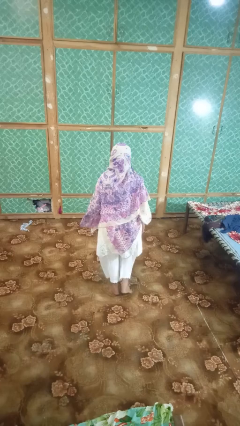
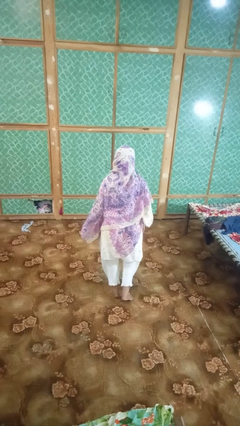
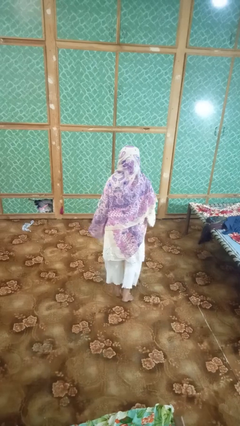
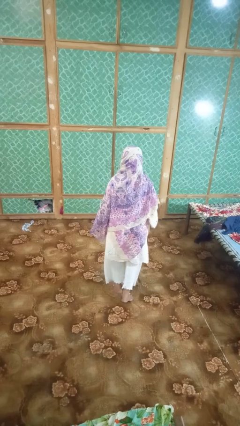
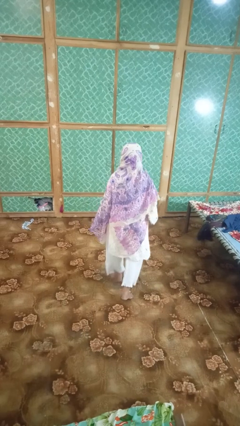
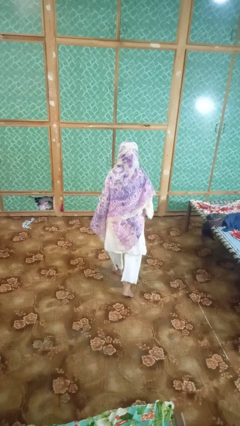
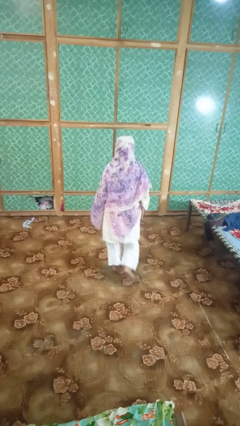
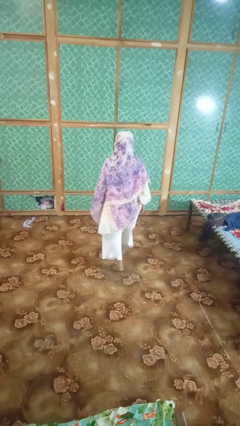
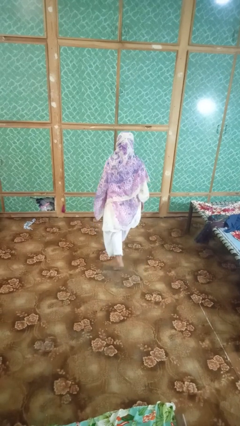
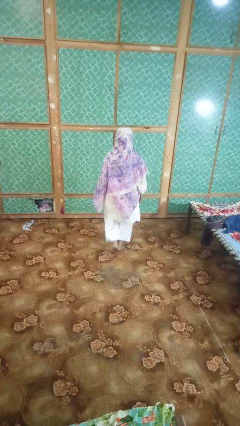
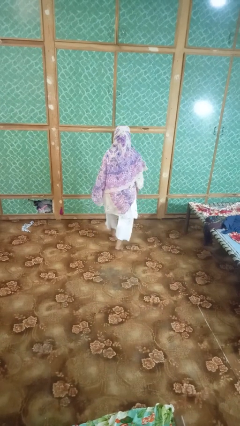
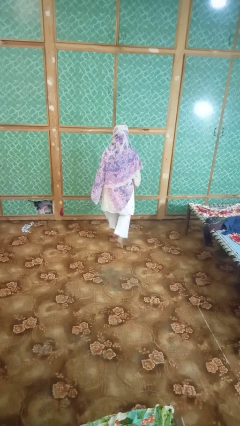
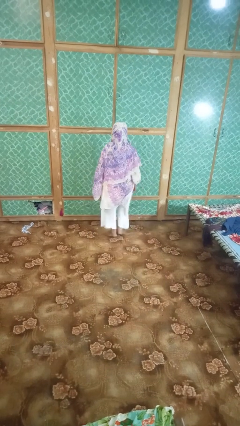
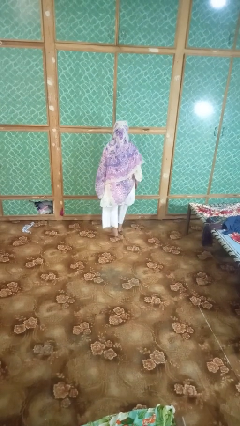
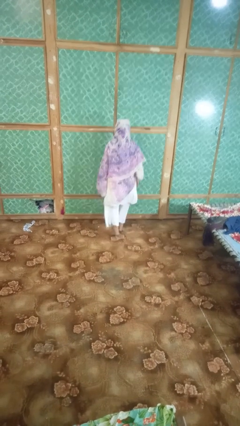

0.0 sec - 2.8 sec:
person walks tiptoe

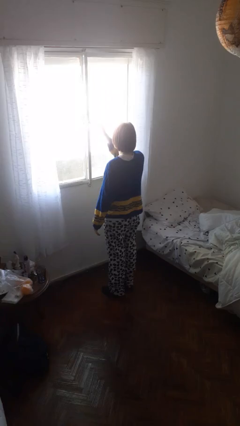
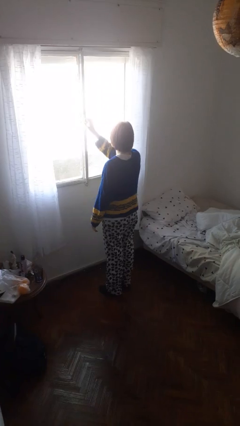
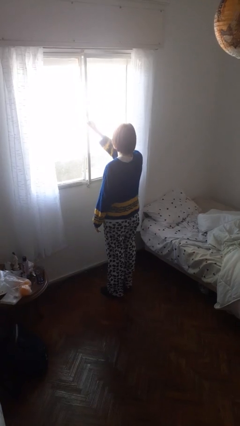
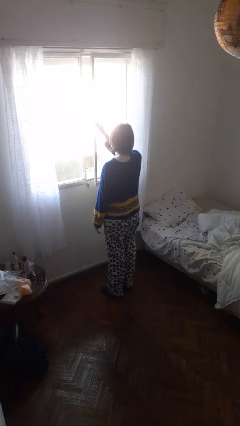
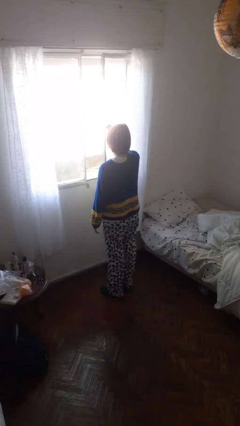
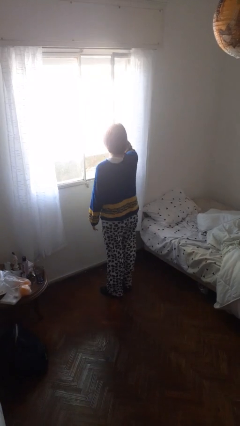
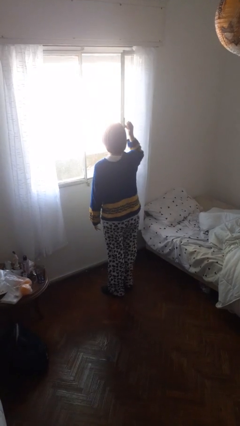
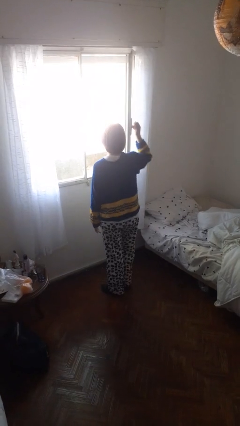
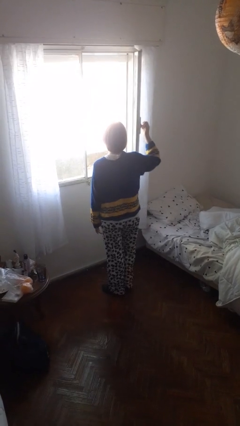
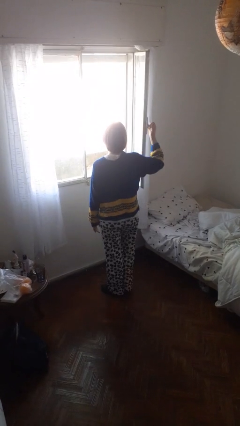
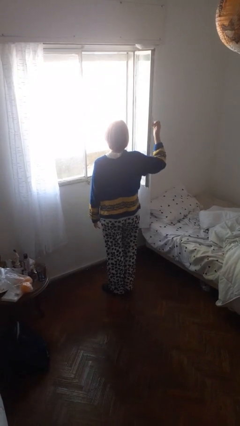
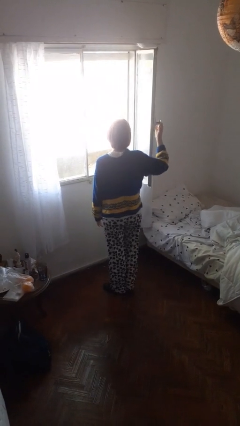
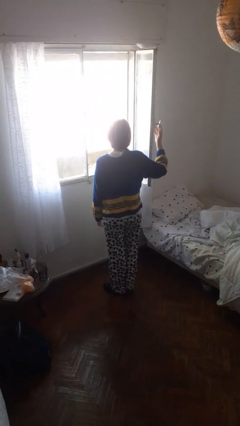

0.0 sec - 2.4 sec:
person opens home window

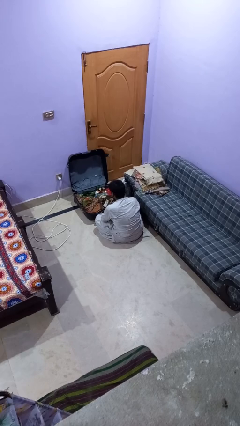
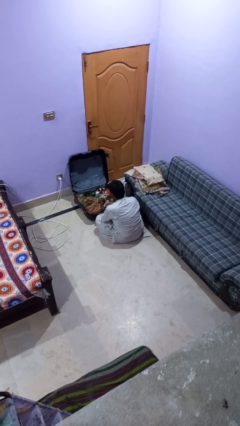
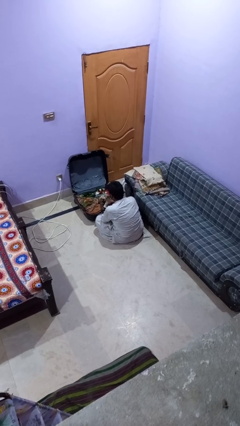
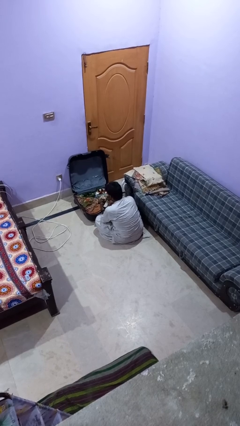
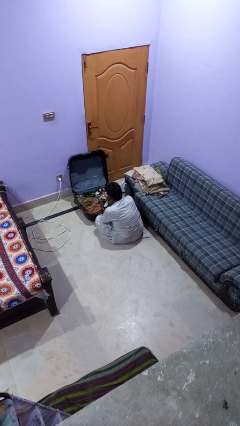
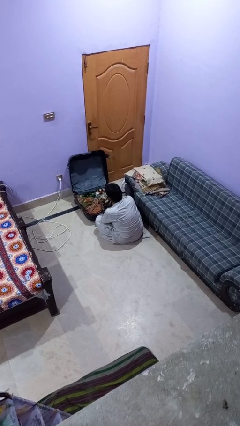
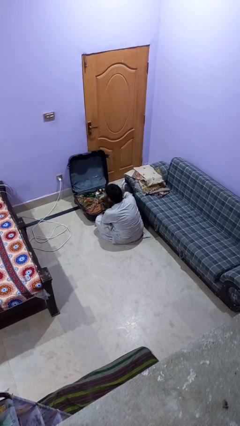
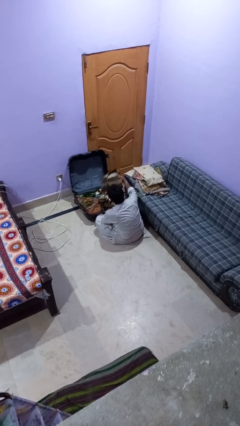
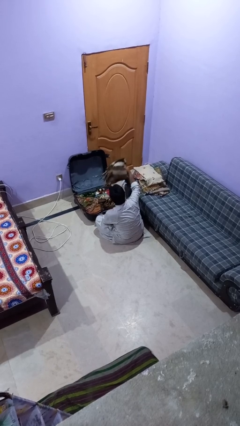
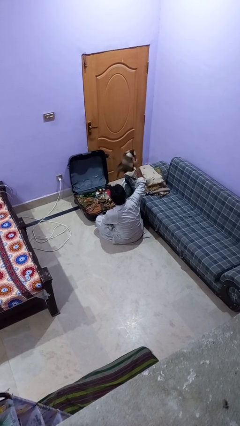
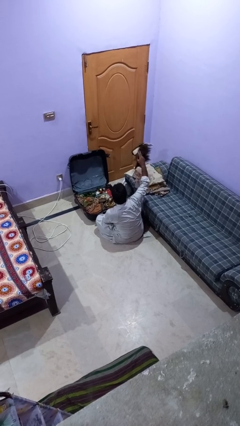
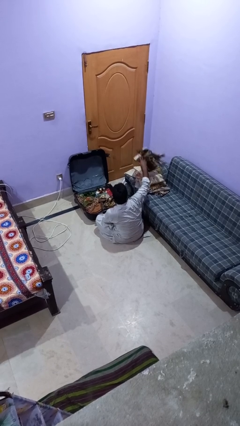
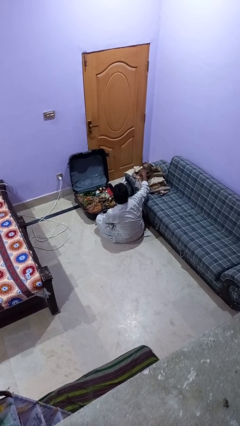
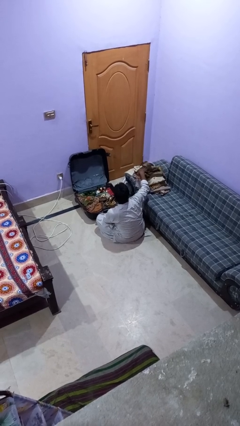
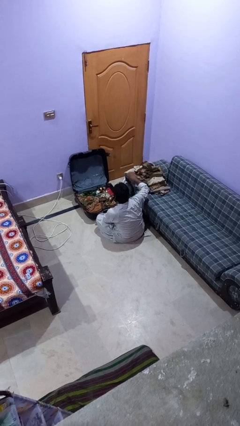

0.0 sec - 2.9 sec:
person unloads clothes from suitcase

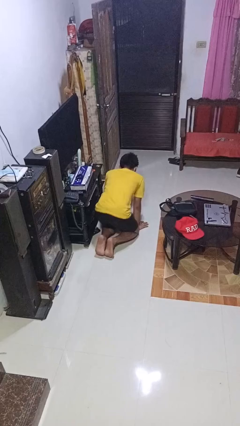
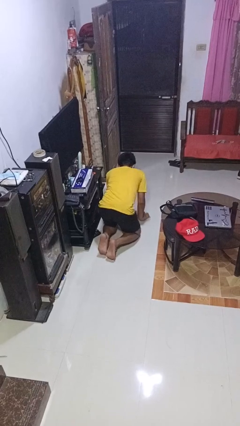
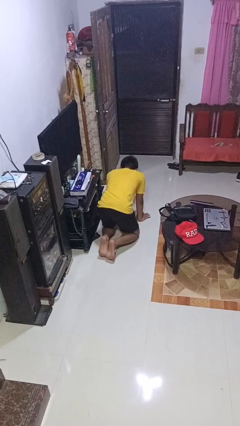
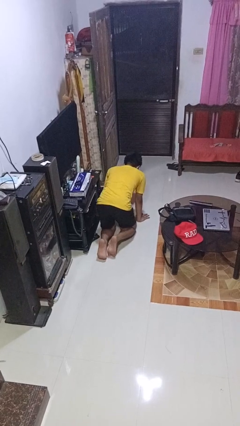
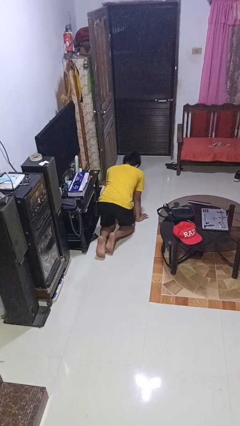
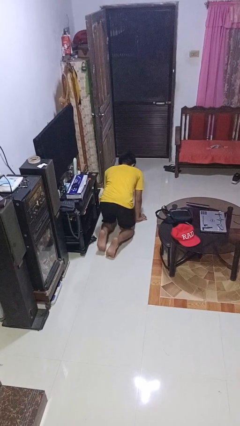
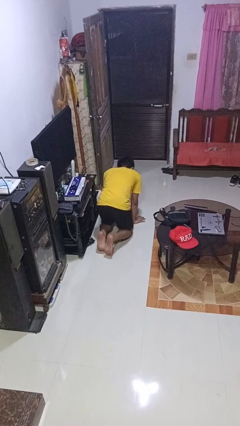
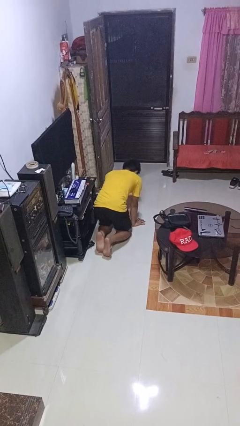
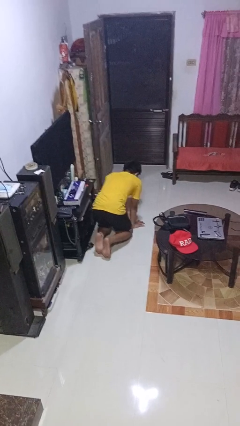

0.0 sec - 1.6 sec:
person crawls

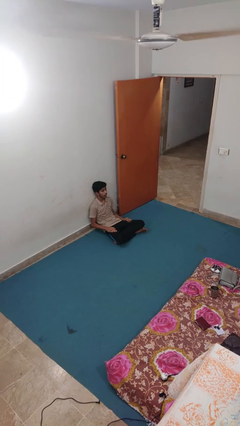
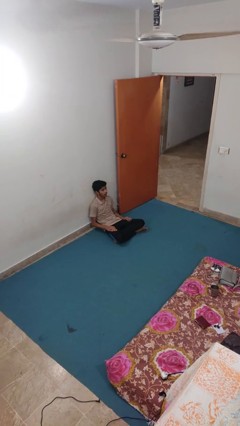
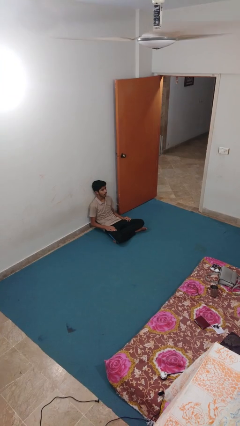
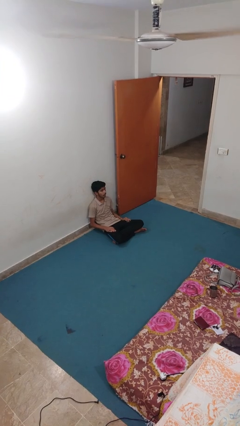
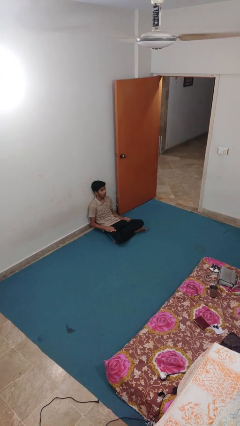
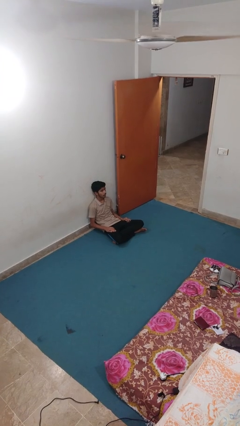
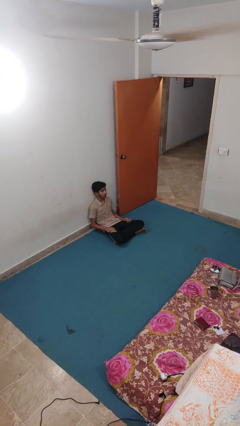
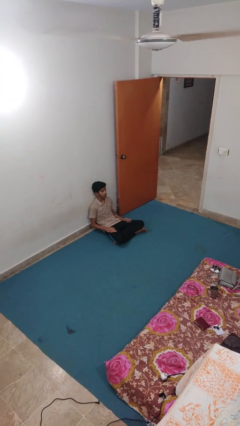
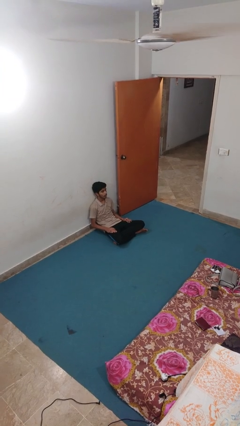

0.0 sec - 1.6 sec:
person slaps hands on thighs

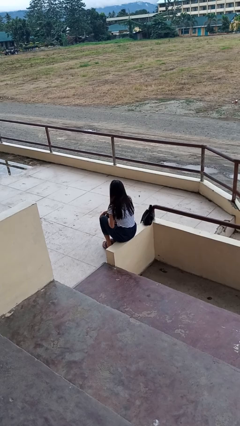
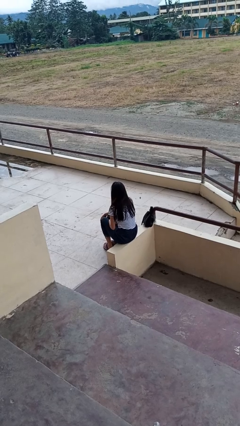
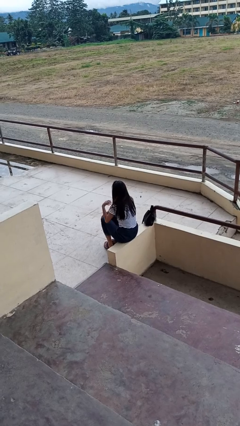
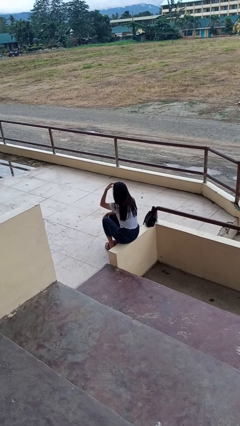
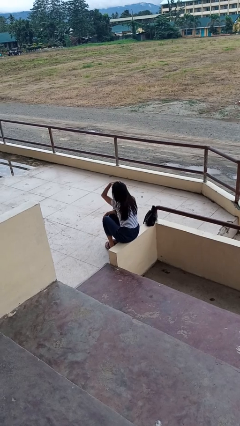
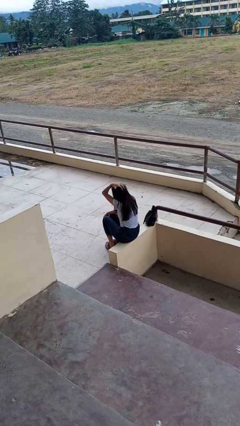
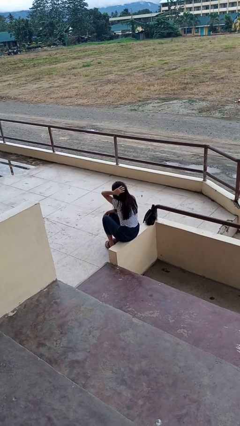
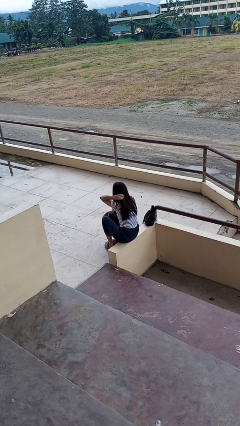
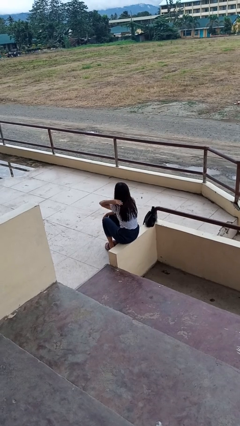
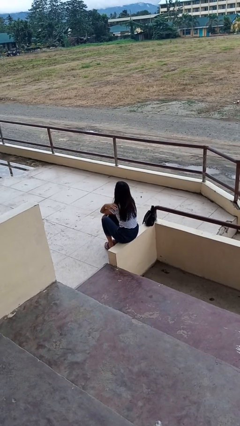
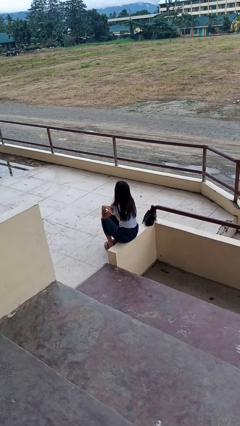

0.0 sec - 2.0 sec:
person strokes hair

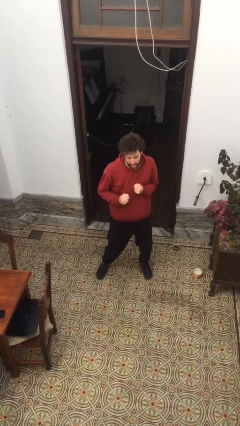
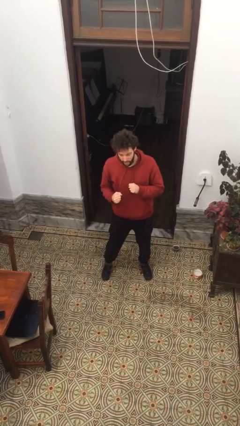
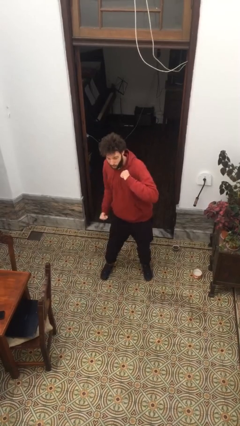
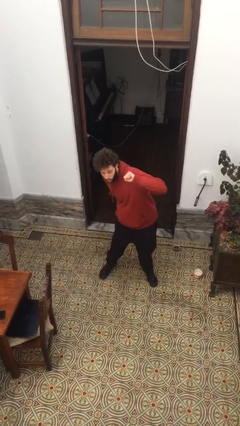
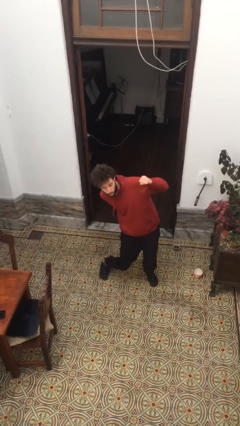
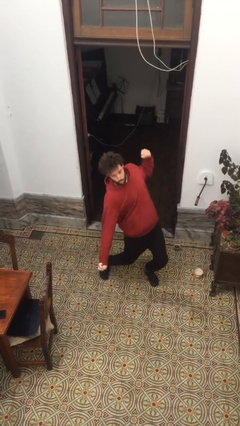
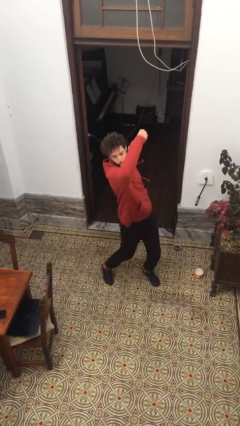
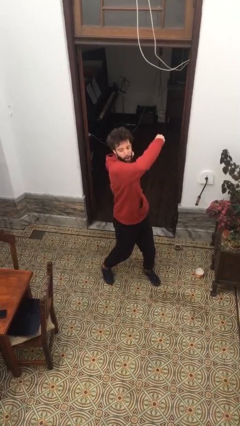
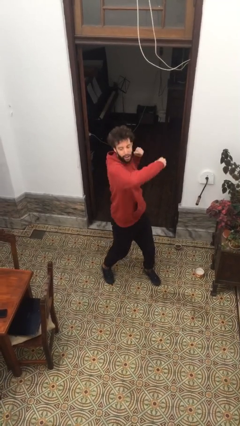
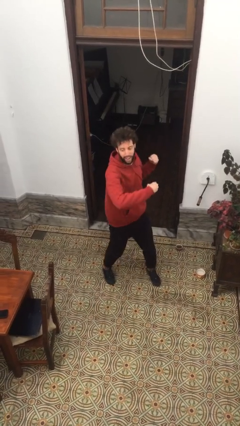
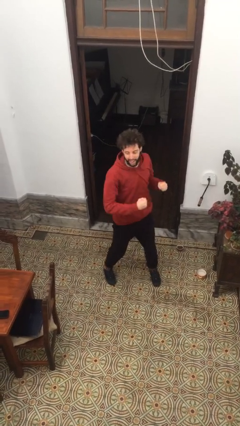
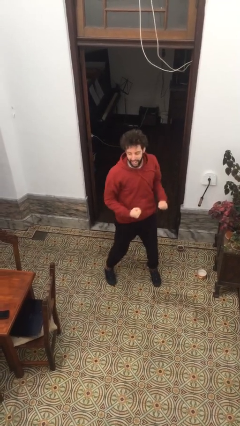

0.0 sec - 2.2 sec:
person punches

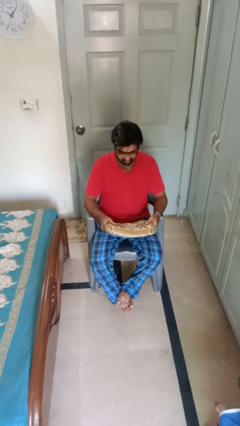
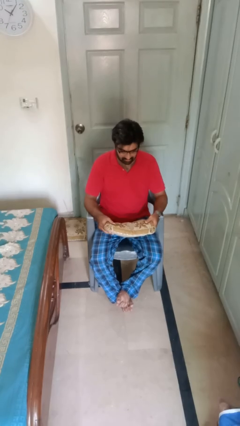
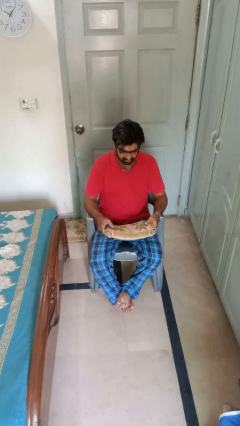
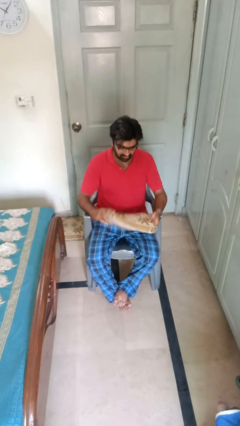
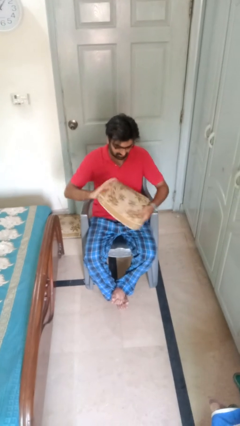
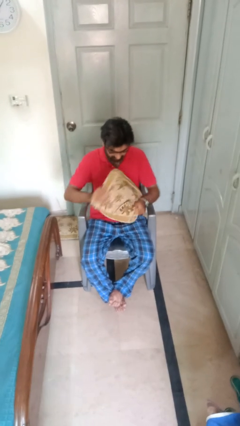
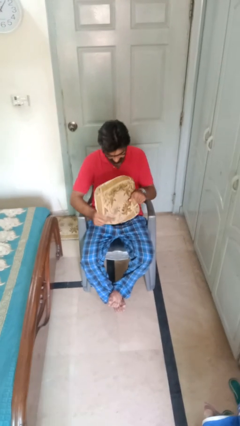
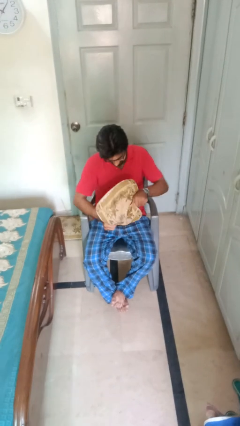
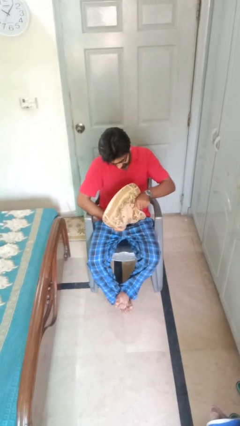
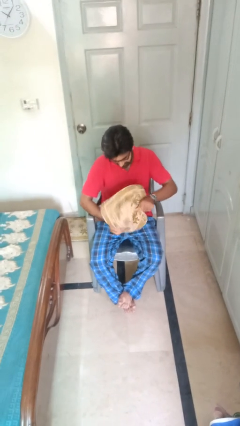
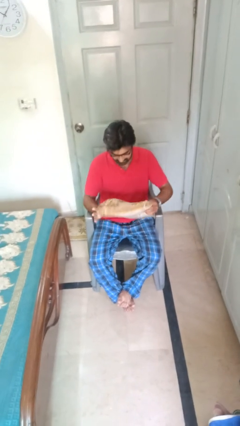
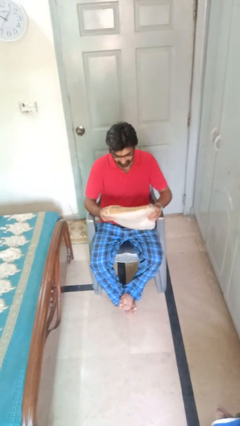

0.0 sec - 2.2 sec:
person squeezes object
